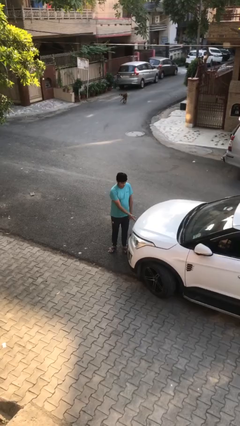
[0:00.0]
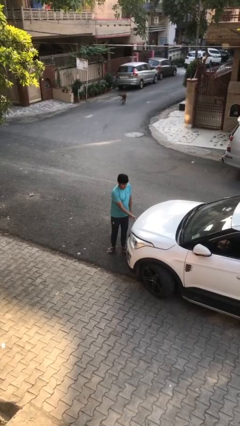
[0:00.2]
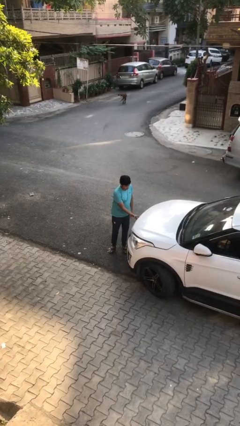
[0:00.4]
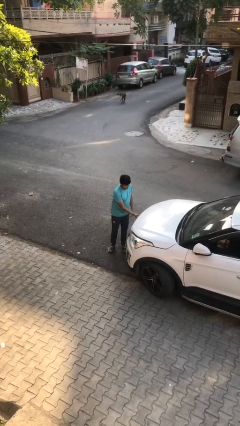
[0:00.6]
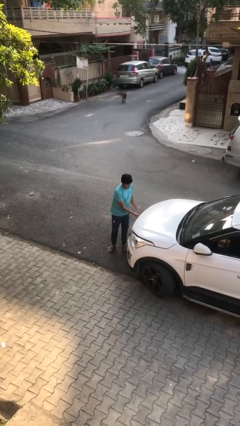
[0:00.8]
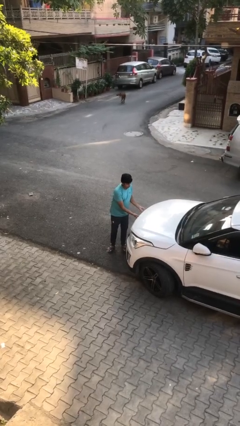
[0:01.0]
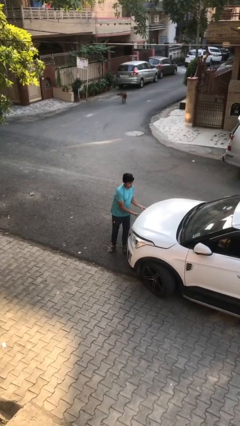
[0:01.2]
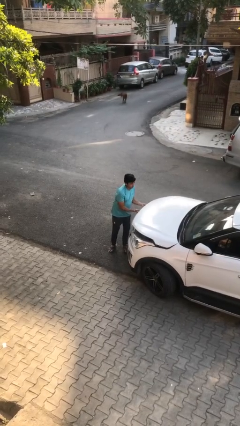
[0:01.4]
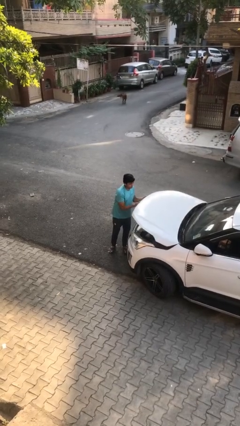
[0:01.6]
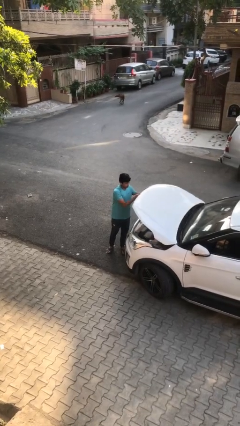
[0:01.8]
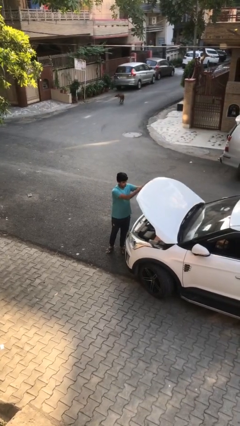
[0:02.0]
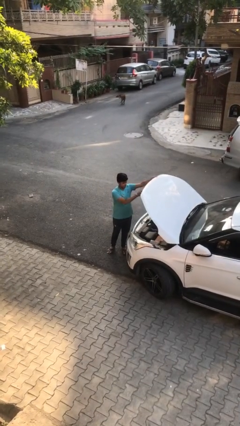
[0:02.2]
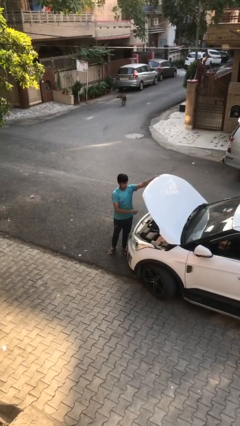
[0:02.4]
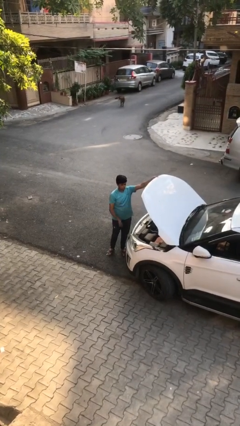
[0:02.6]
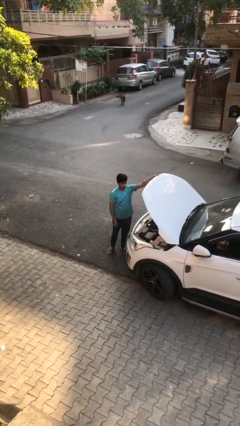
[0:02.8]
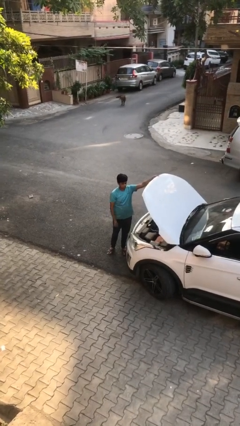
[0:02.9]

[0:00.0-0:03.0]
person opens car hood

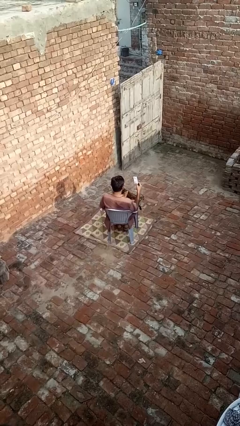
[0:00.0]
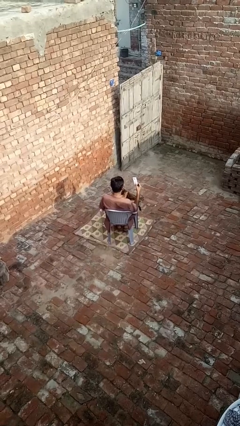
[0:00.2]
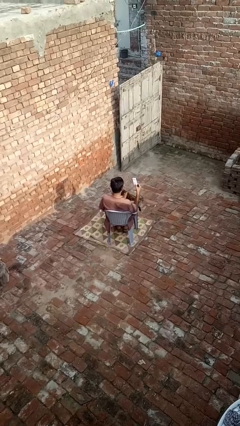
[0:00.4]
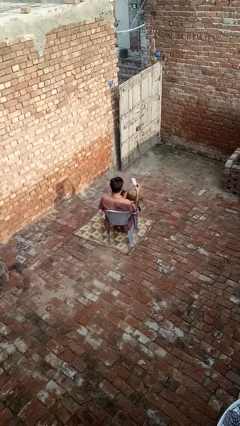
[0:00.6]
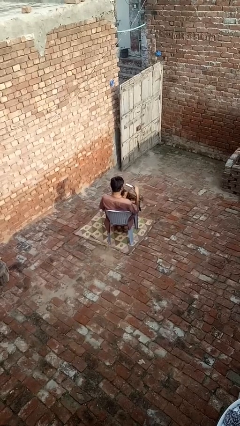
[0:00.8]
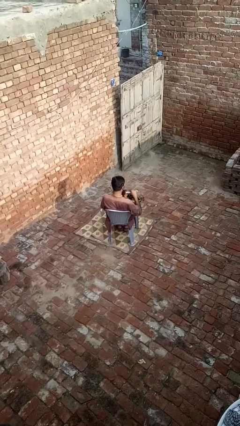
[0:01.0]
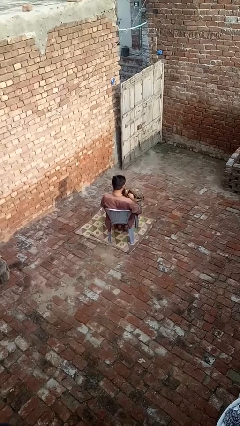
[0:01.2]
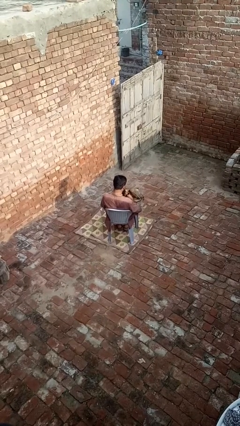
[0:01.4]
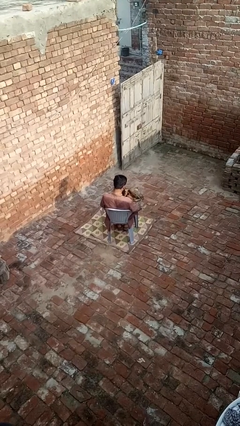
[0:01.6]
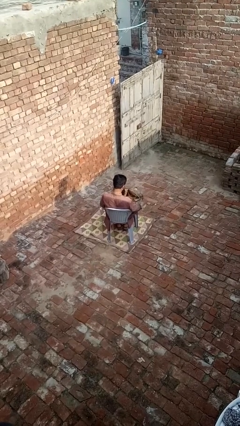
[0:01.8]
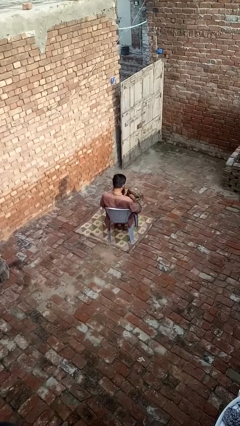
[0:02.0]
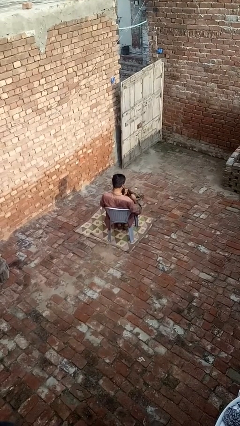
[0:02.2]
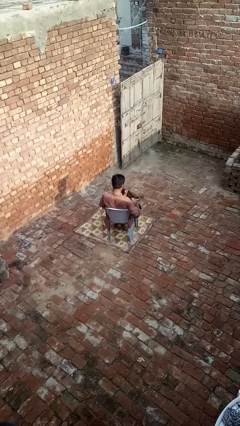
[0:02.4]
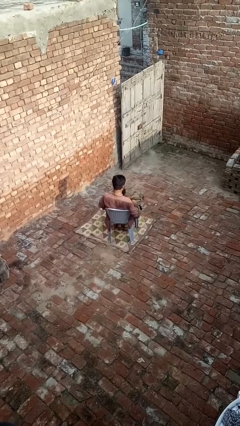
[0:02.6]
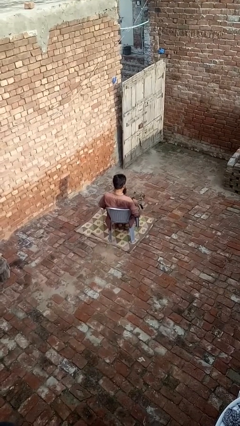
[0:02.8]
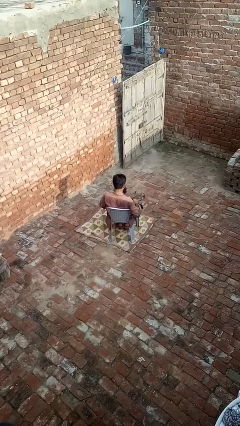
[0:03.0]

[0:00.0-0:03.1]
person puts object into purse

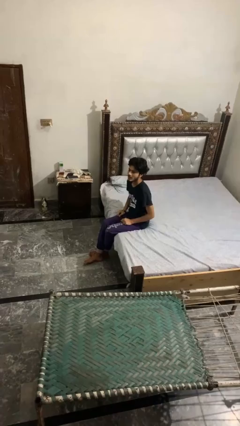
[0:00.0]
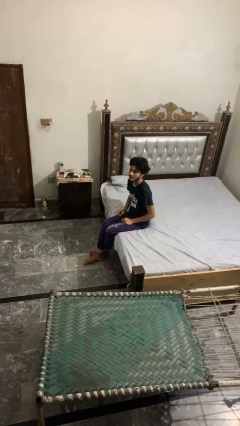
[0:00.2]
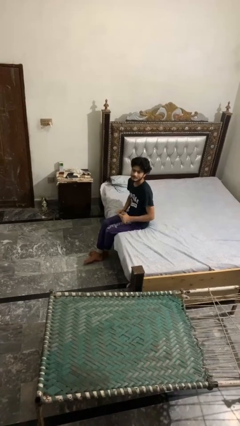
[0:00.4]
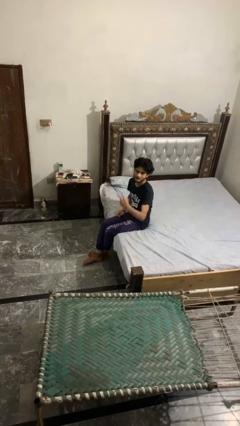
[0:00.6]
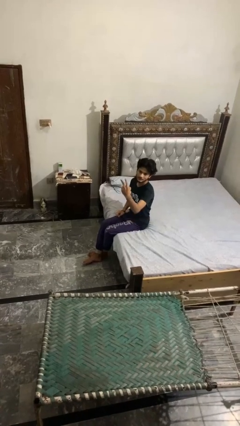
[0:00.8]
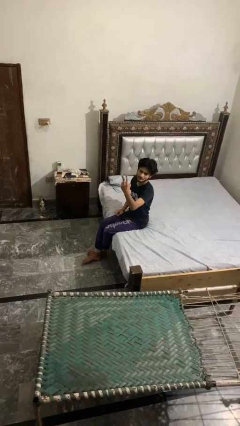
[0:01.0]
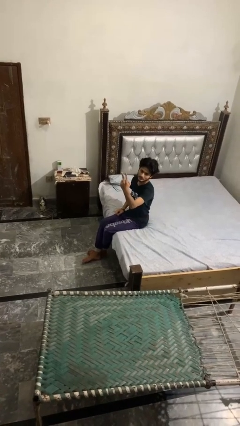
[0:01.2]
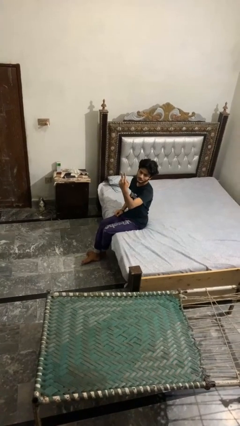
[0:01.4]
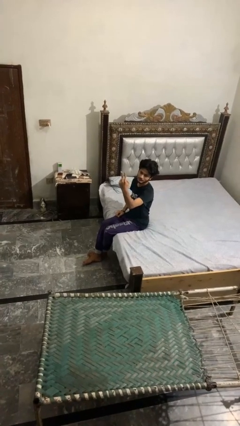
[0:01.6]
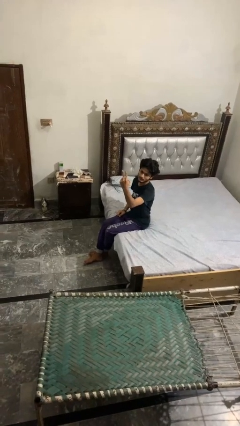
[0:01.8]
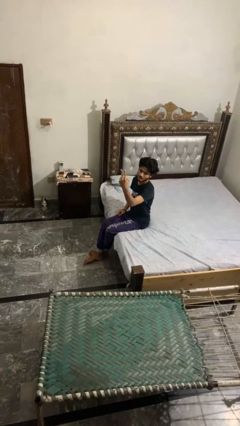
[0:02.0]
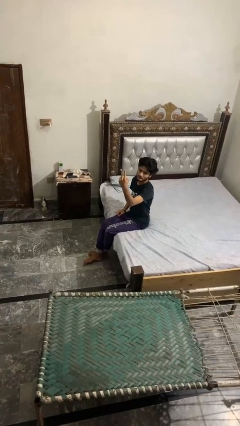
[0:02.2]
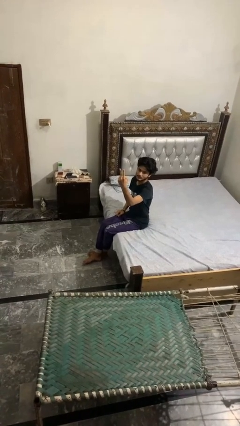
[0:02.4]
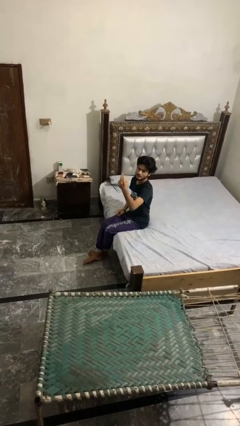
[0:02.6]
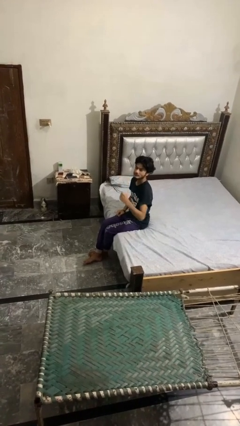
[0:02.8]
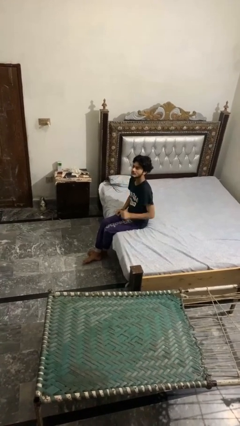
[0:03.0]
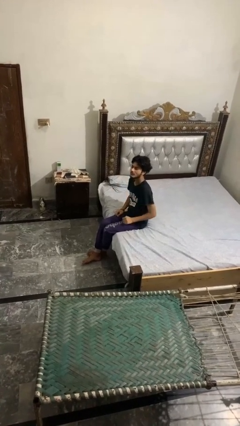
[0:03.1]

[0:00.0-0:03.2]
person gestures peace

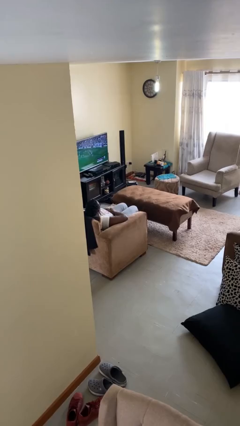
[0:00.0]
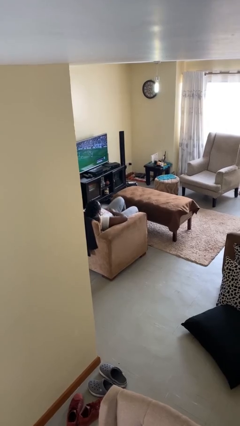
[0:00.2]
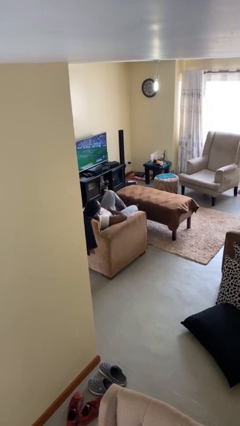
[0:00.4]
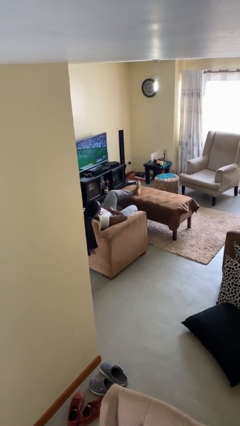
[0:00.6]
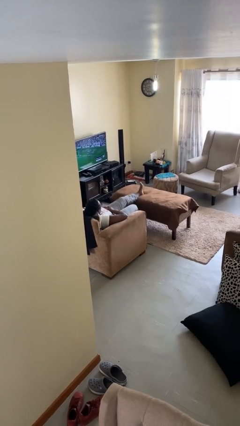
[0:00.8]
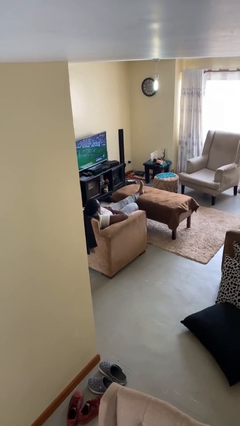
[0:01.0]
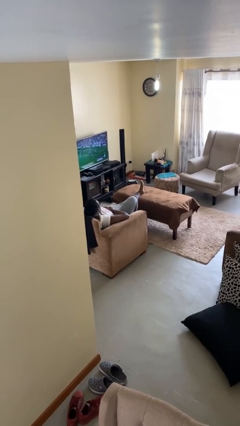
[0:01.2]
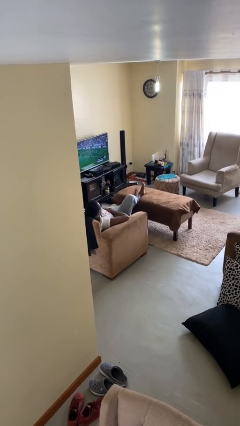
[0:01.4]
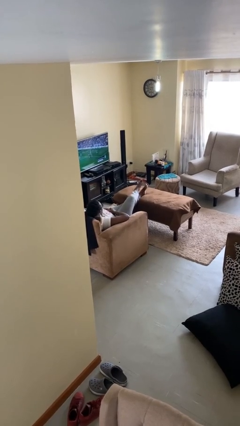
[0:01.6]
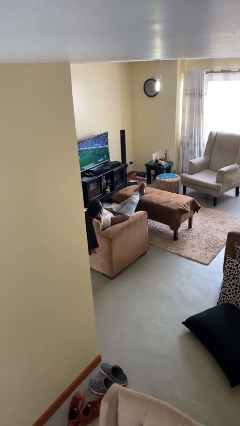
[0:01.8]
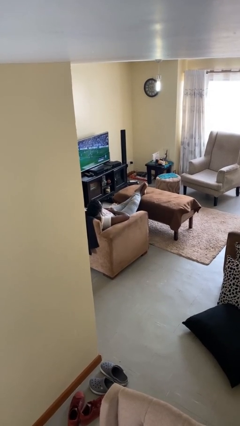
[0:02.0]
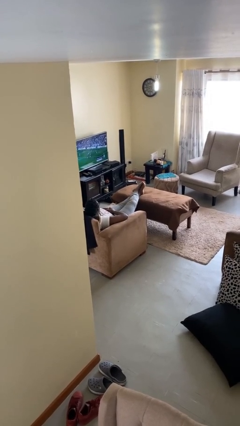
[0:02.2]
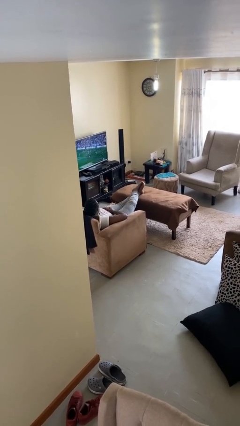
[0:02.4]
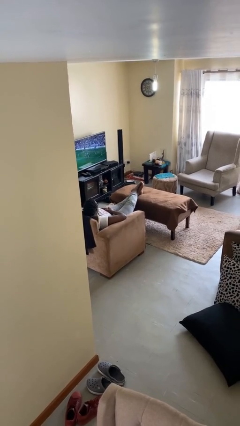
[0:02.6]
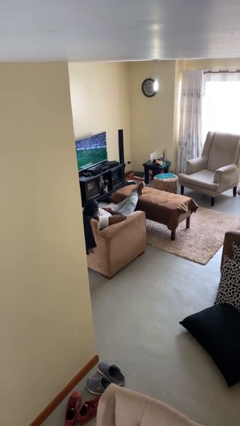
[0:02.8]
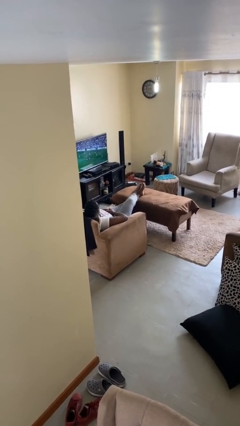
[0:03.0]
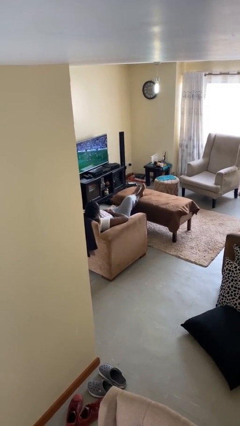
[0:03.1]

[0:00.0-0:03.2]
person puts feet up

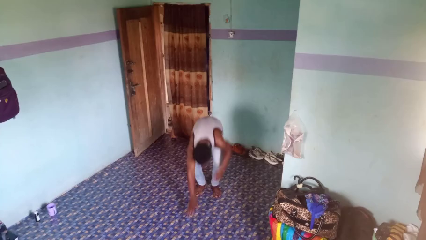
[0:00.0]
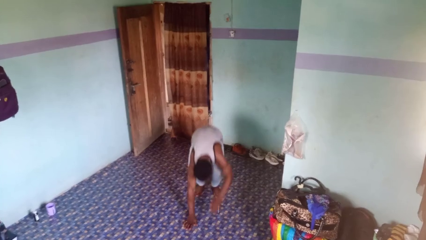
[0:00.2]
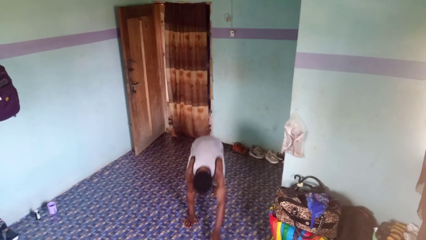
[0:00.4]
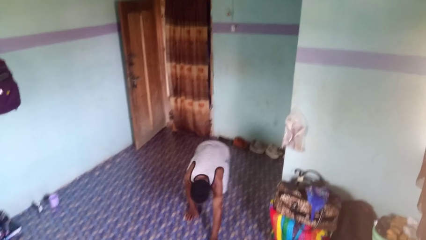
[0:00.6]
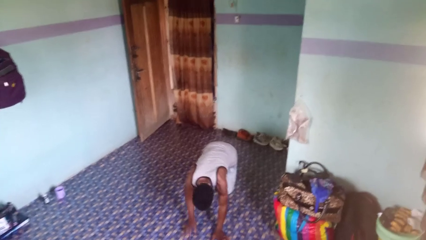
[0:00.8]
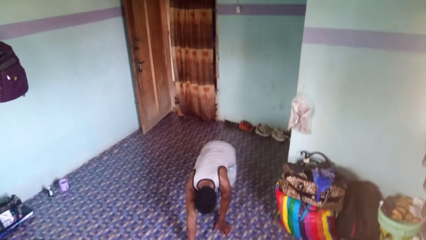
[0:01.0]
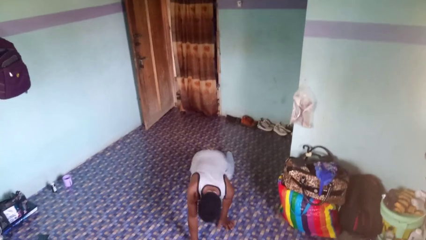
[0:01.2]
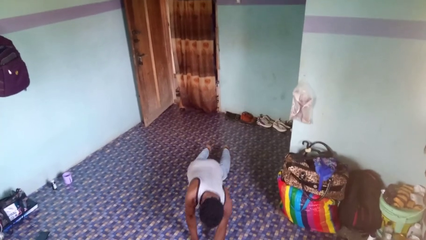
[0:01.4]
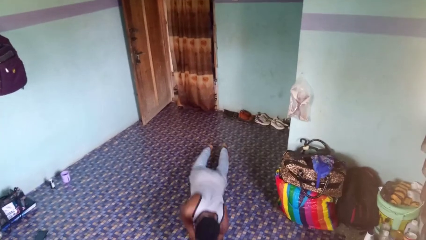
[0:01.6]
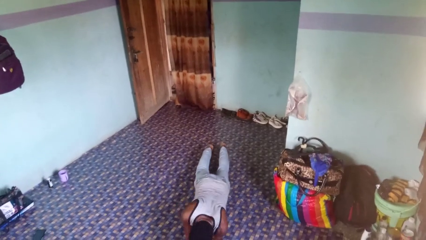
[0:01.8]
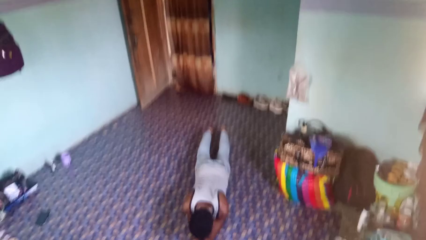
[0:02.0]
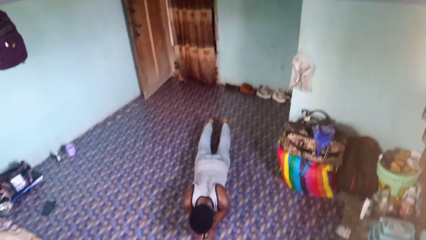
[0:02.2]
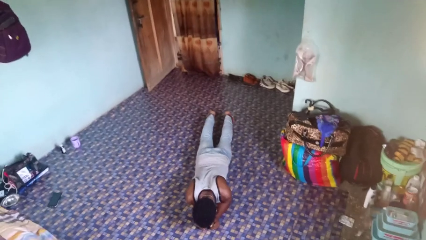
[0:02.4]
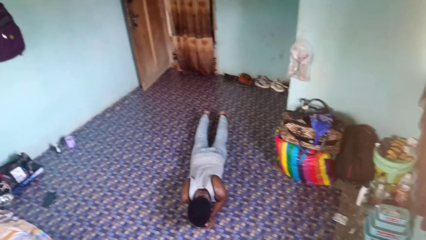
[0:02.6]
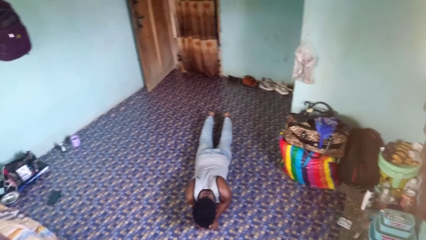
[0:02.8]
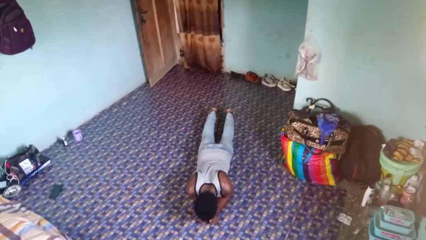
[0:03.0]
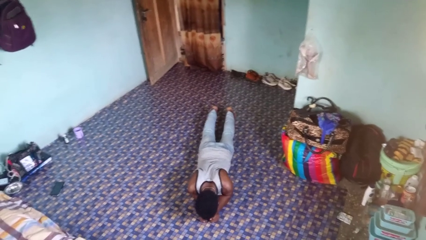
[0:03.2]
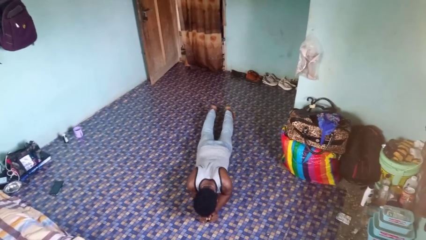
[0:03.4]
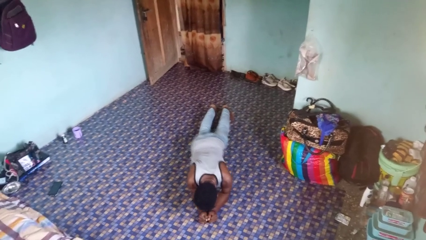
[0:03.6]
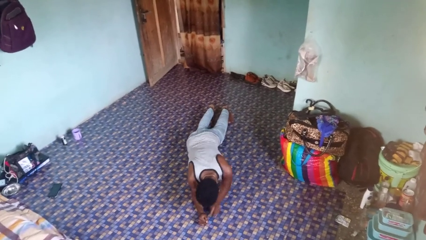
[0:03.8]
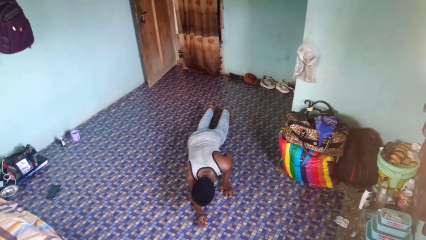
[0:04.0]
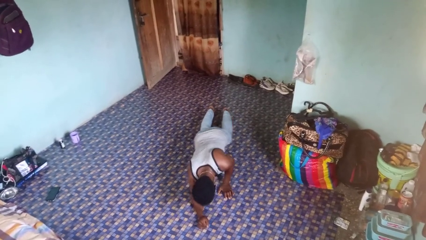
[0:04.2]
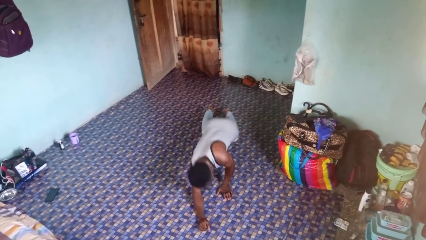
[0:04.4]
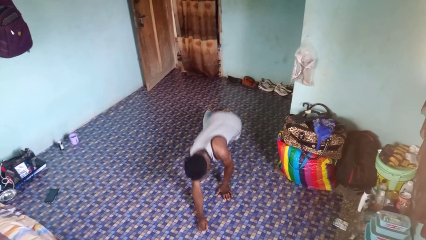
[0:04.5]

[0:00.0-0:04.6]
person exercises with plank

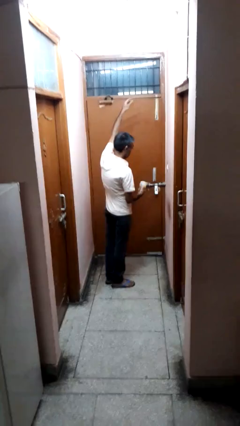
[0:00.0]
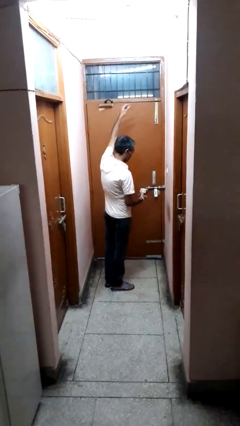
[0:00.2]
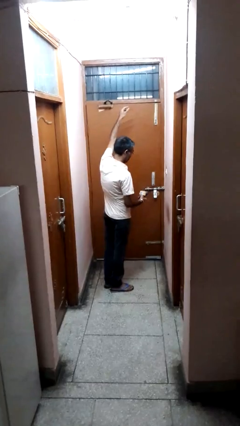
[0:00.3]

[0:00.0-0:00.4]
person catches dropped object

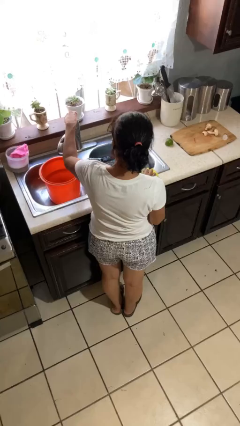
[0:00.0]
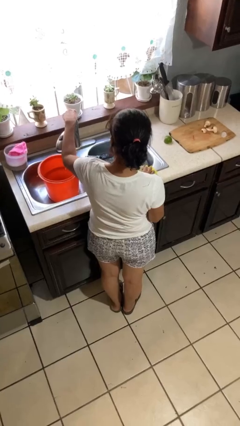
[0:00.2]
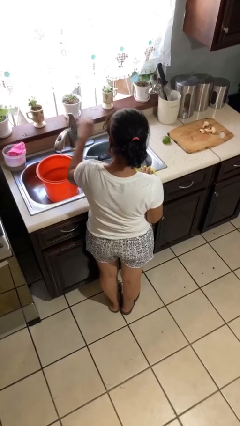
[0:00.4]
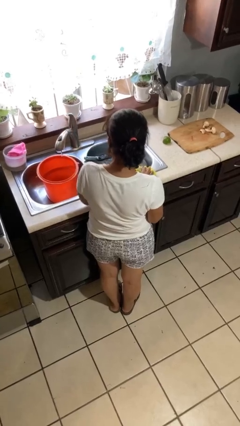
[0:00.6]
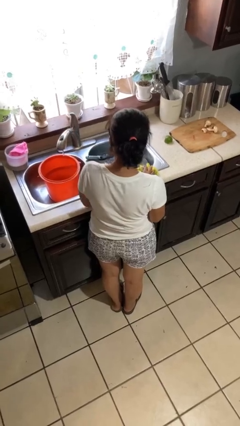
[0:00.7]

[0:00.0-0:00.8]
person turns on faucet
